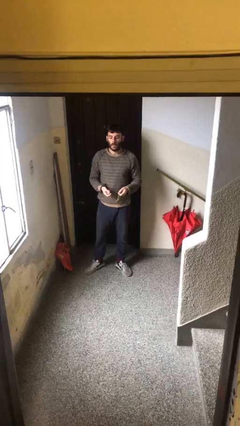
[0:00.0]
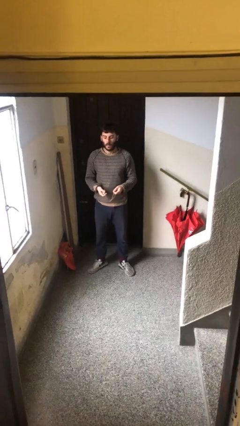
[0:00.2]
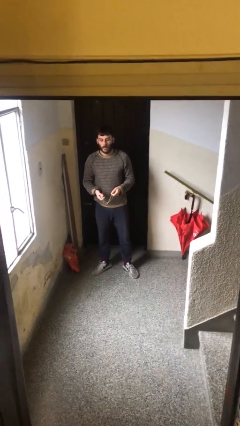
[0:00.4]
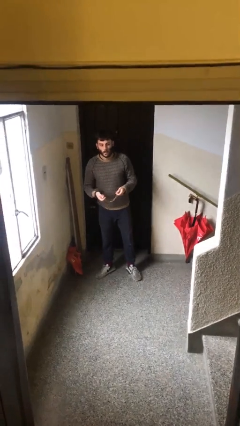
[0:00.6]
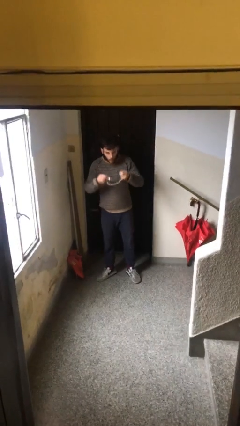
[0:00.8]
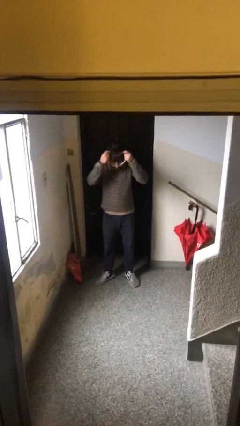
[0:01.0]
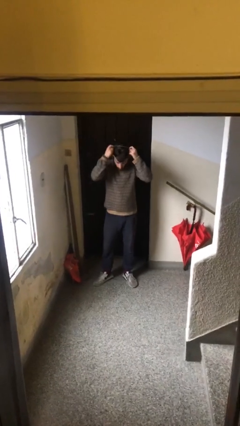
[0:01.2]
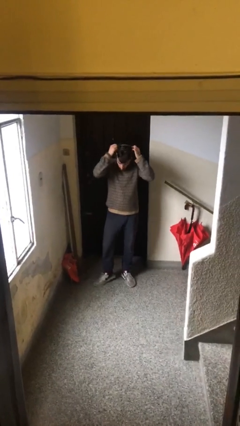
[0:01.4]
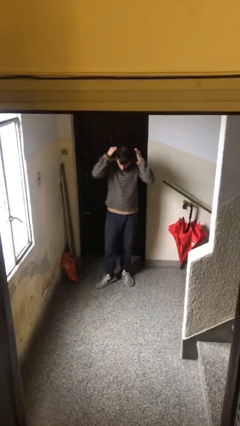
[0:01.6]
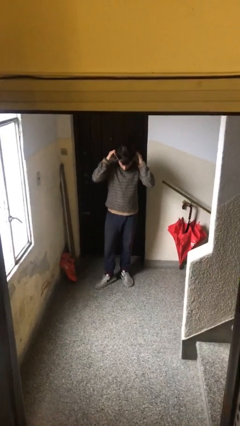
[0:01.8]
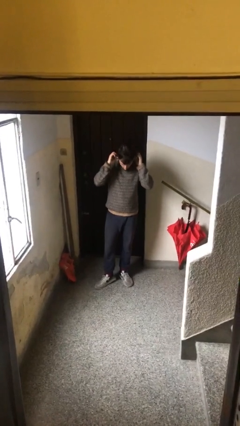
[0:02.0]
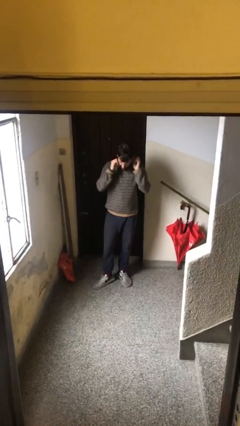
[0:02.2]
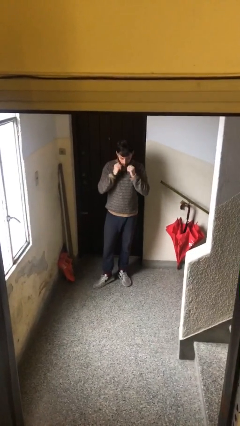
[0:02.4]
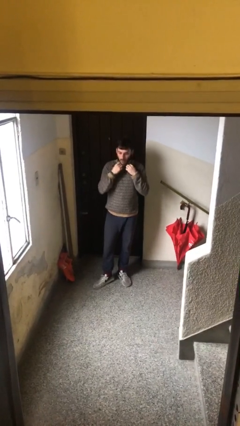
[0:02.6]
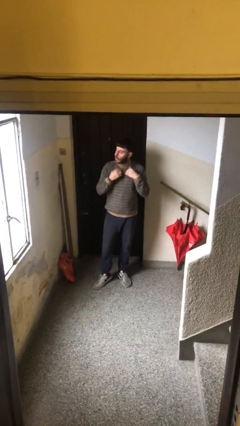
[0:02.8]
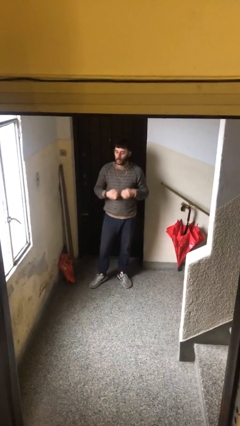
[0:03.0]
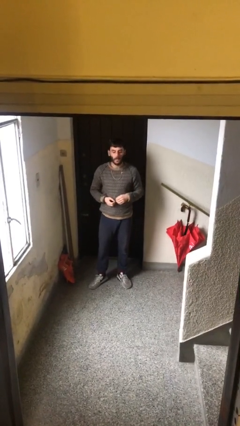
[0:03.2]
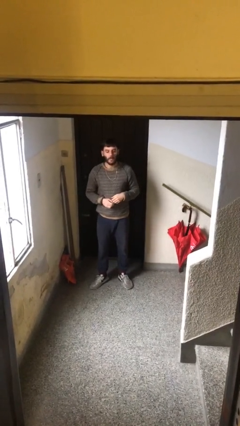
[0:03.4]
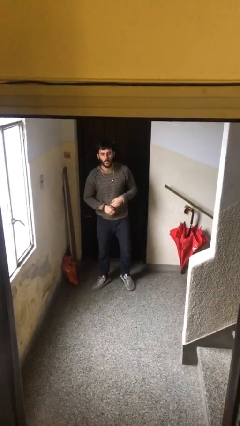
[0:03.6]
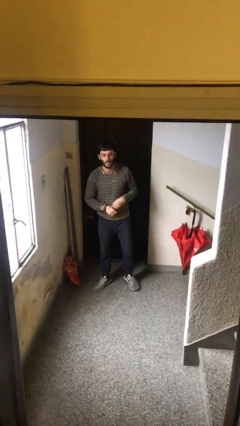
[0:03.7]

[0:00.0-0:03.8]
person puts on necklace

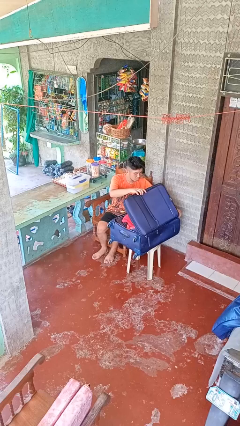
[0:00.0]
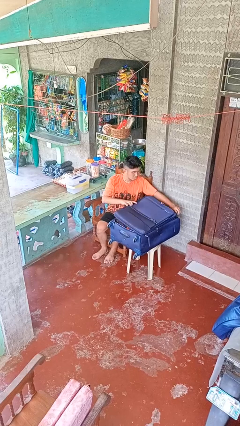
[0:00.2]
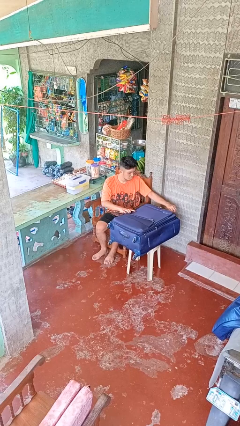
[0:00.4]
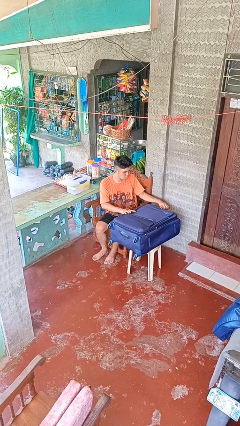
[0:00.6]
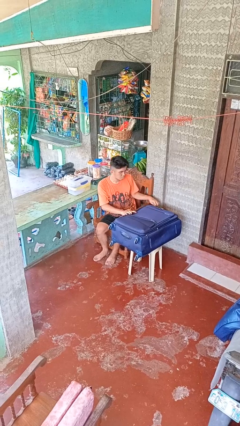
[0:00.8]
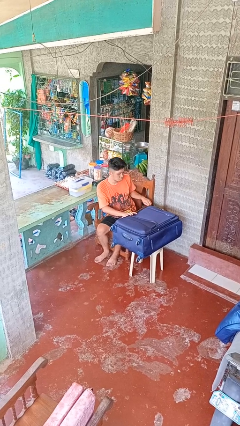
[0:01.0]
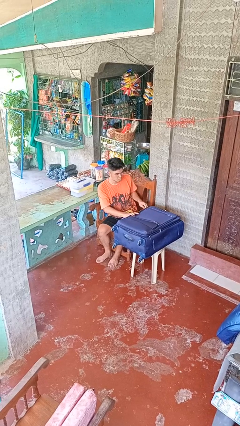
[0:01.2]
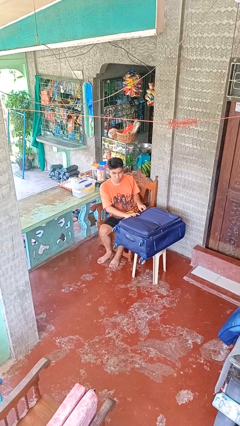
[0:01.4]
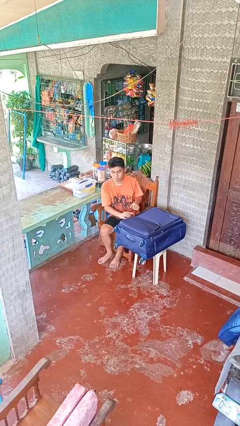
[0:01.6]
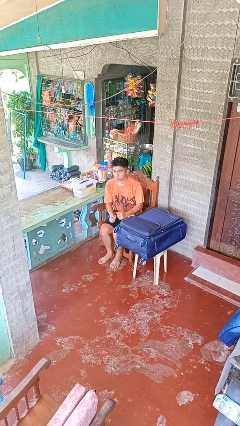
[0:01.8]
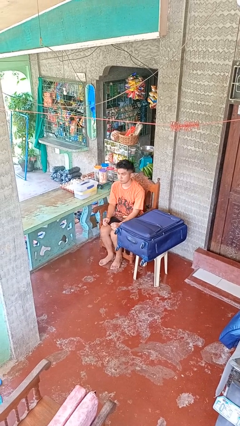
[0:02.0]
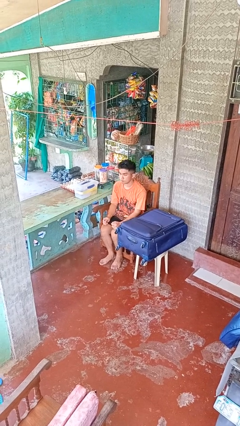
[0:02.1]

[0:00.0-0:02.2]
person closes suitcase

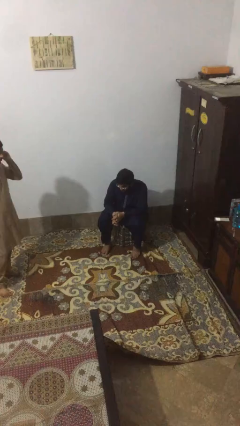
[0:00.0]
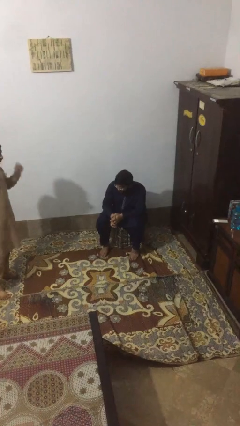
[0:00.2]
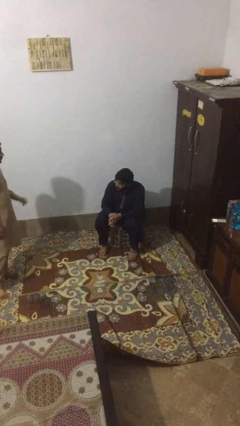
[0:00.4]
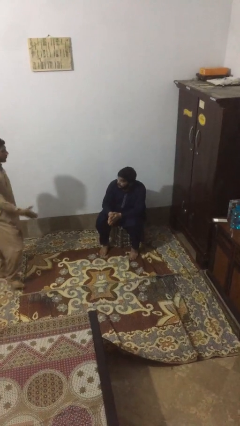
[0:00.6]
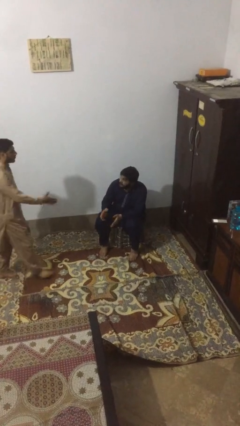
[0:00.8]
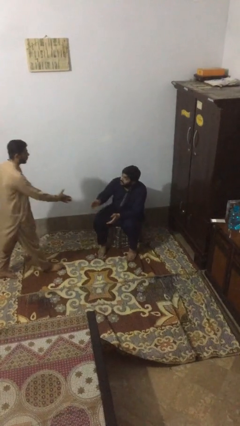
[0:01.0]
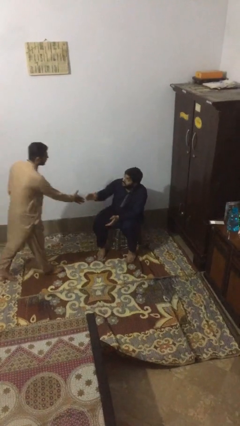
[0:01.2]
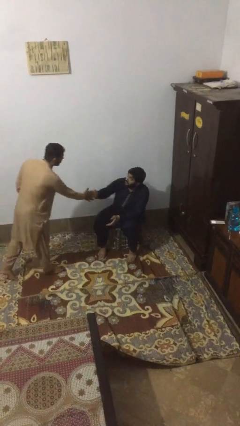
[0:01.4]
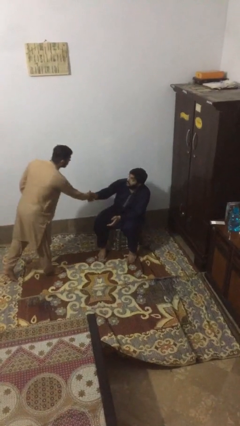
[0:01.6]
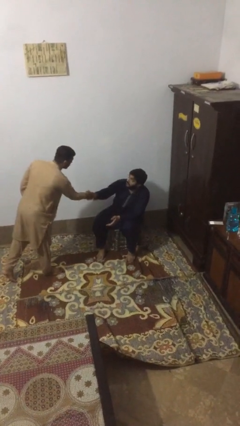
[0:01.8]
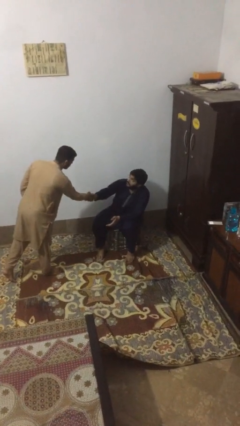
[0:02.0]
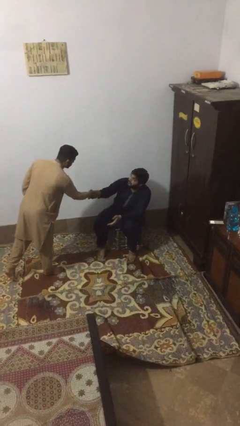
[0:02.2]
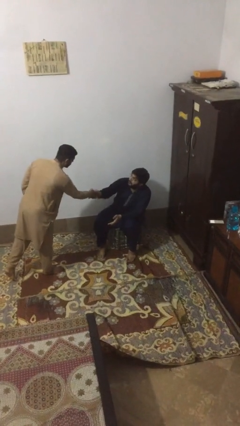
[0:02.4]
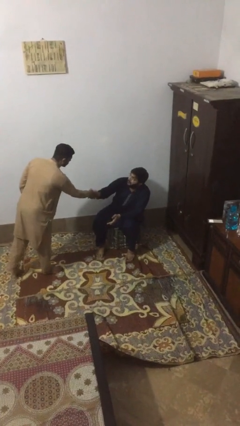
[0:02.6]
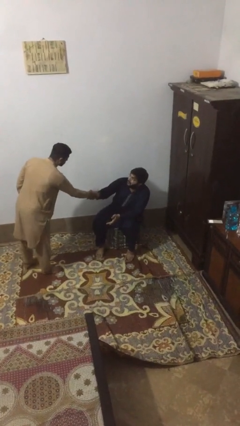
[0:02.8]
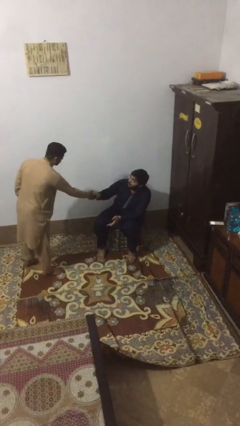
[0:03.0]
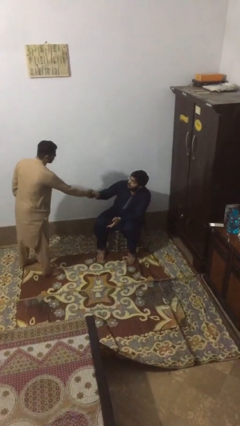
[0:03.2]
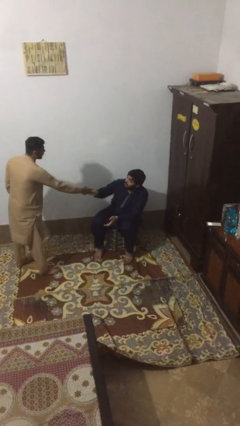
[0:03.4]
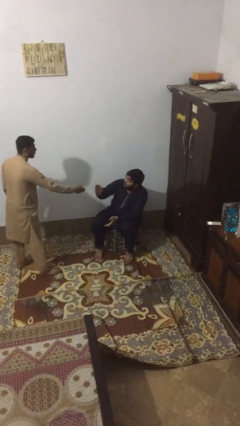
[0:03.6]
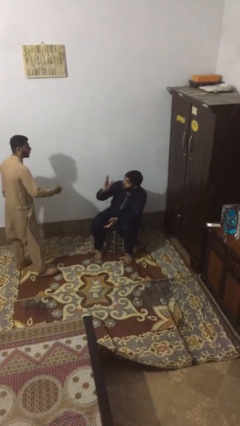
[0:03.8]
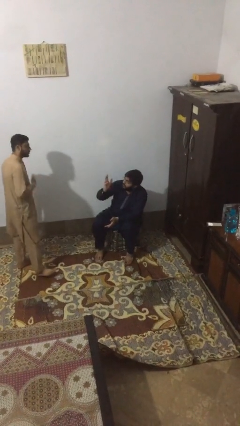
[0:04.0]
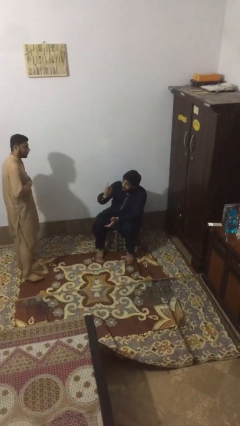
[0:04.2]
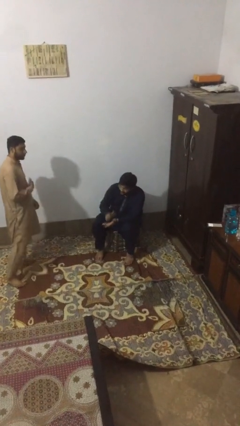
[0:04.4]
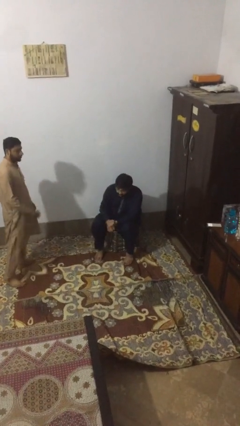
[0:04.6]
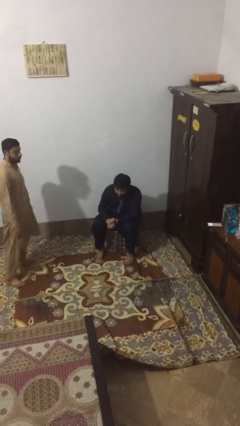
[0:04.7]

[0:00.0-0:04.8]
person shakes hand

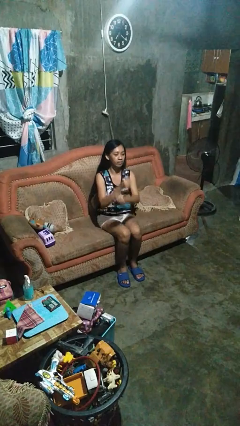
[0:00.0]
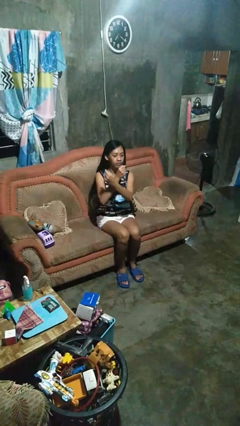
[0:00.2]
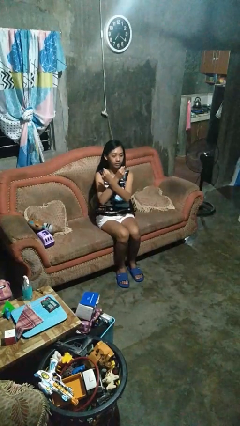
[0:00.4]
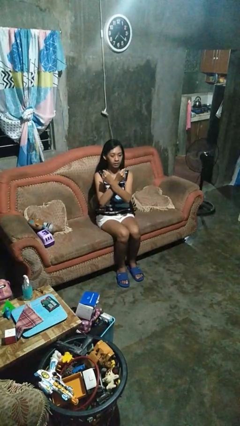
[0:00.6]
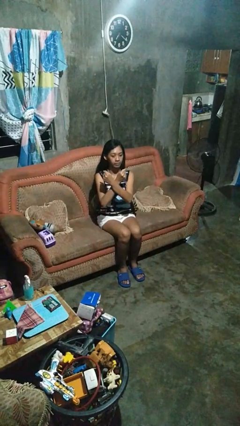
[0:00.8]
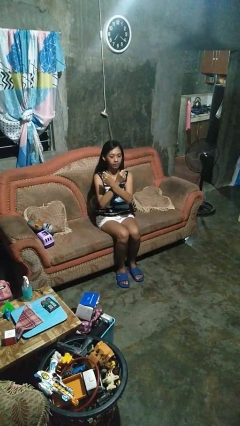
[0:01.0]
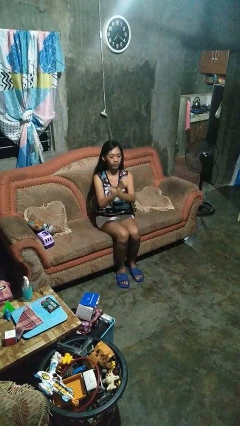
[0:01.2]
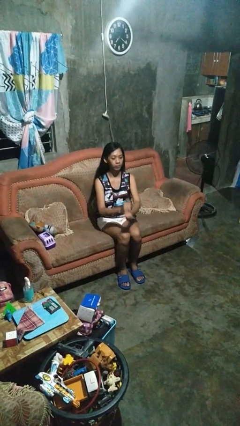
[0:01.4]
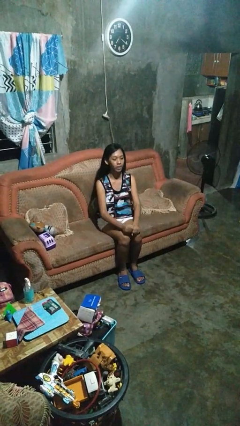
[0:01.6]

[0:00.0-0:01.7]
person gestures arms x

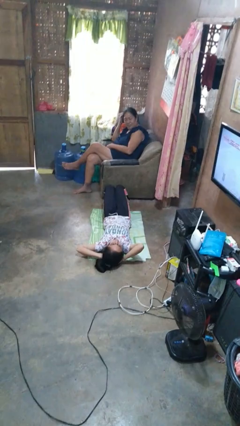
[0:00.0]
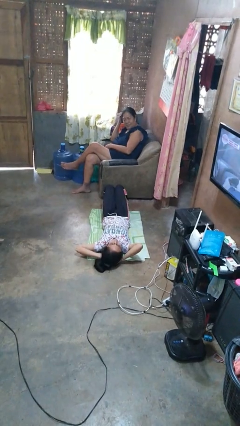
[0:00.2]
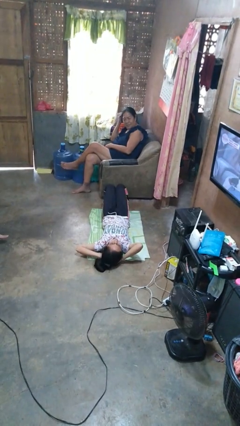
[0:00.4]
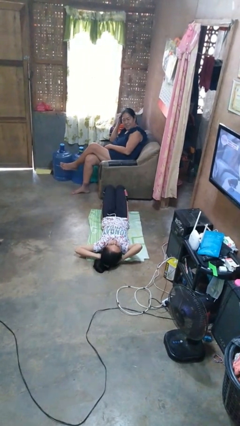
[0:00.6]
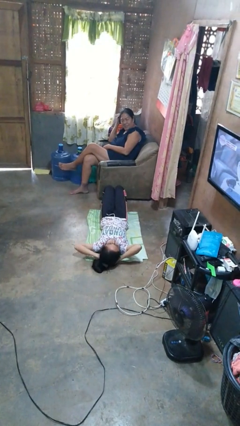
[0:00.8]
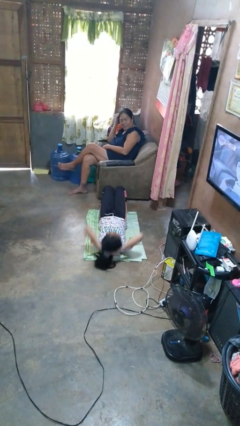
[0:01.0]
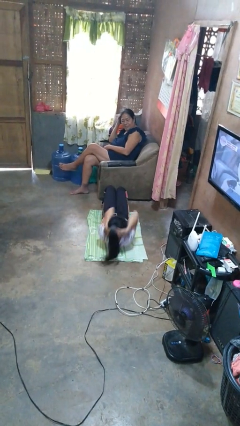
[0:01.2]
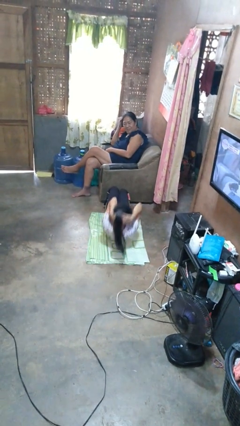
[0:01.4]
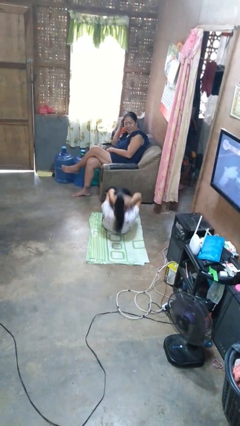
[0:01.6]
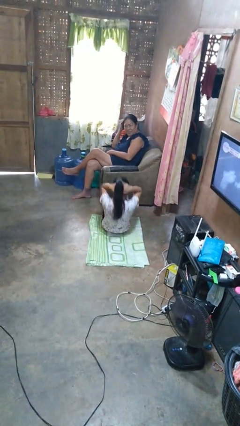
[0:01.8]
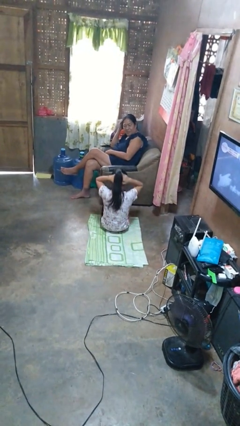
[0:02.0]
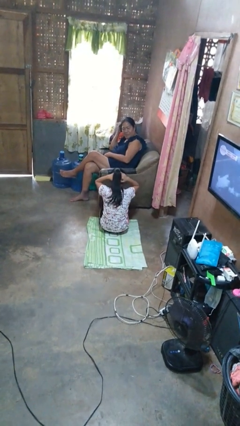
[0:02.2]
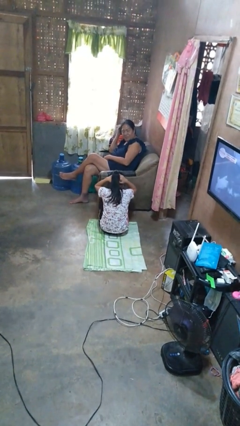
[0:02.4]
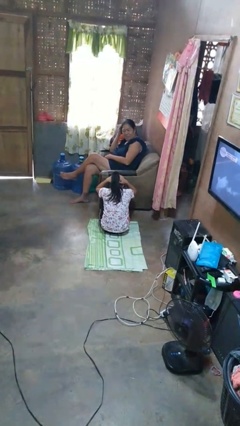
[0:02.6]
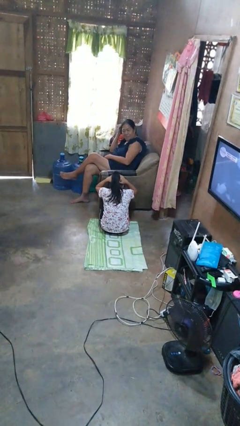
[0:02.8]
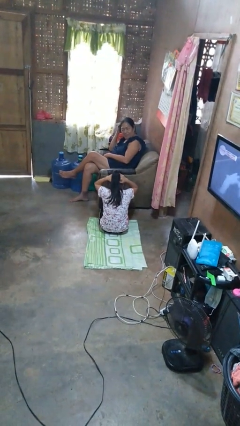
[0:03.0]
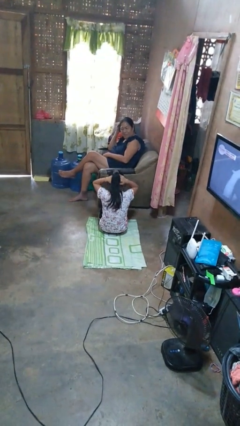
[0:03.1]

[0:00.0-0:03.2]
person exercises with situp

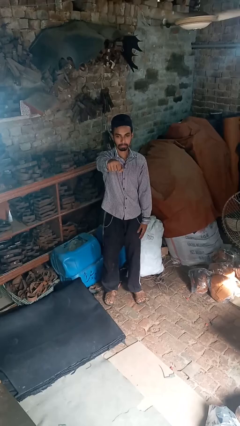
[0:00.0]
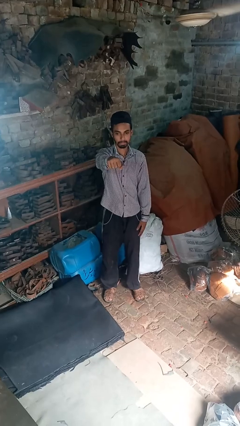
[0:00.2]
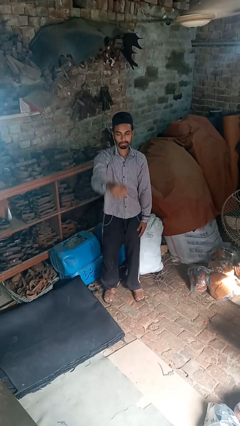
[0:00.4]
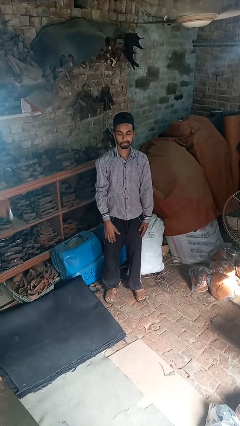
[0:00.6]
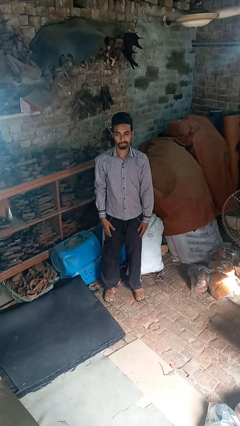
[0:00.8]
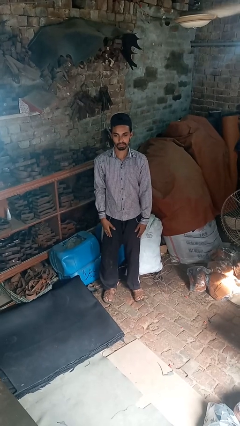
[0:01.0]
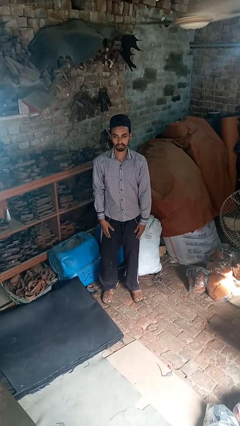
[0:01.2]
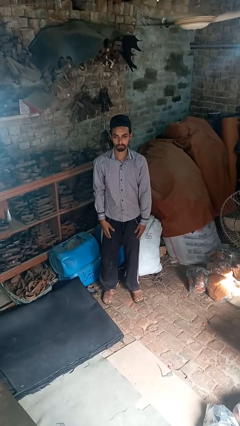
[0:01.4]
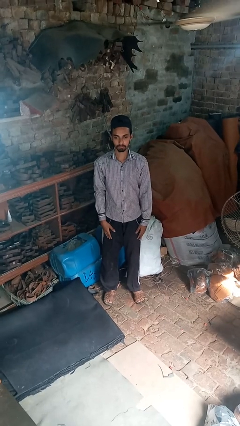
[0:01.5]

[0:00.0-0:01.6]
person punches
